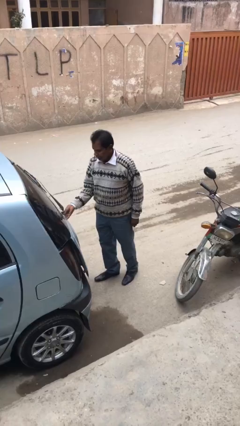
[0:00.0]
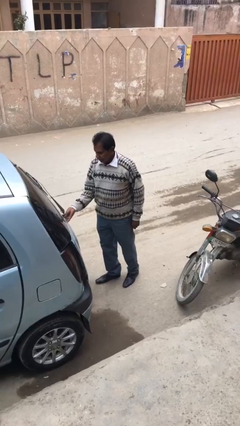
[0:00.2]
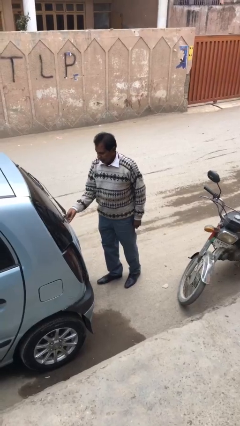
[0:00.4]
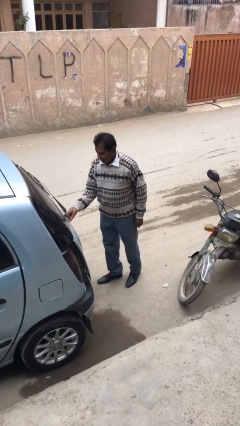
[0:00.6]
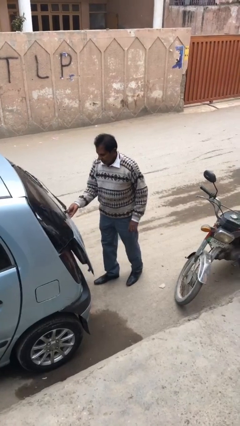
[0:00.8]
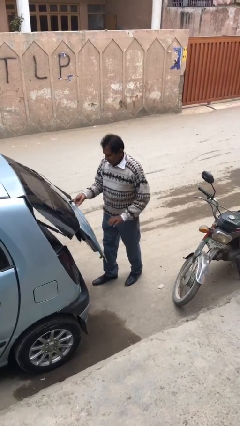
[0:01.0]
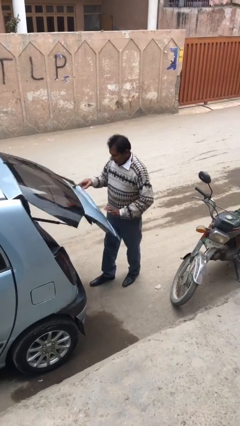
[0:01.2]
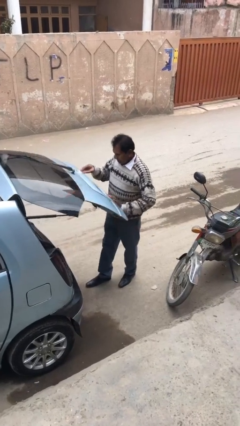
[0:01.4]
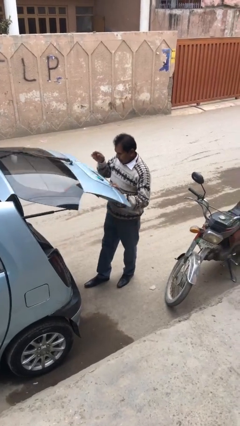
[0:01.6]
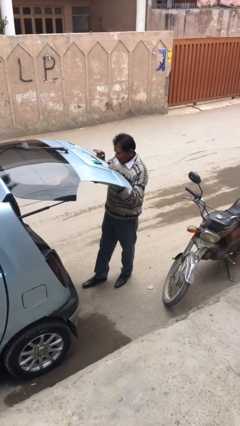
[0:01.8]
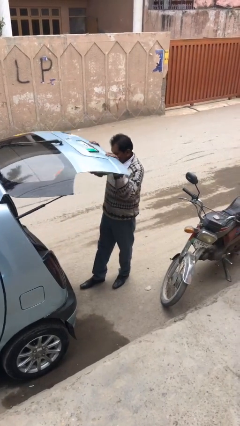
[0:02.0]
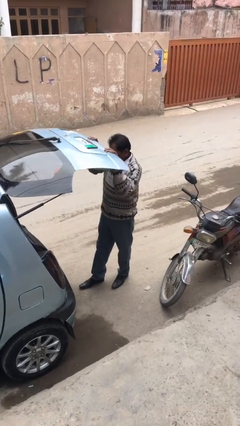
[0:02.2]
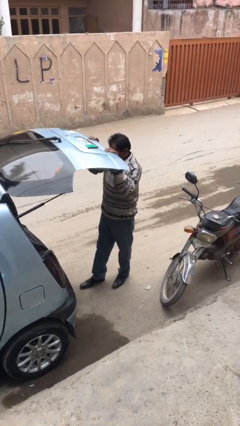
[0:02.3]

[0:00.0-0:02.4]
person opens car trunk

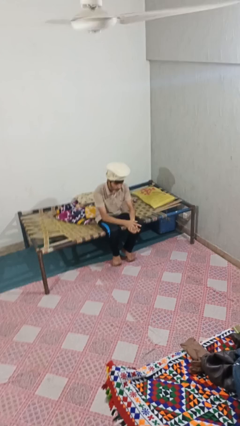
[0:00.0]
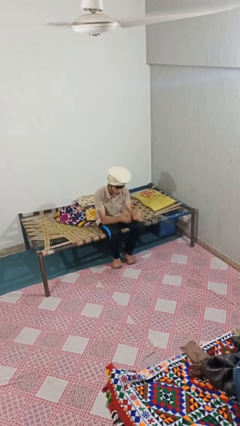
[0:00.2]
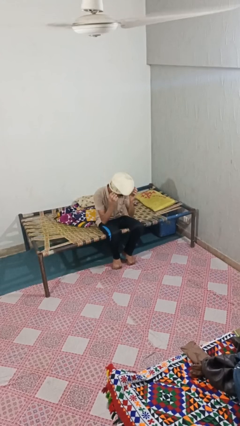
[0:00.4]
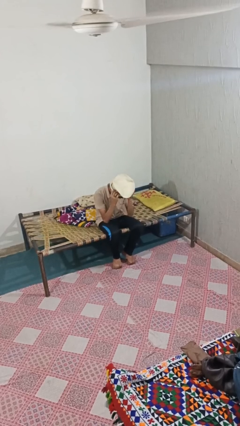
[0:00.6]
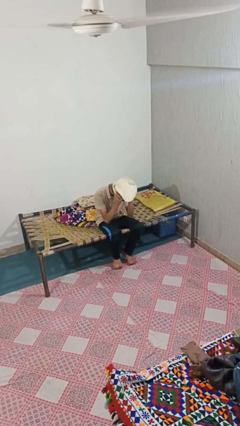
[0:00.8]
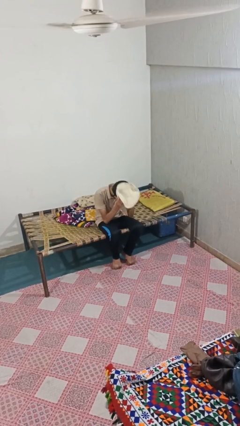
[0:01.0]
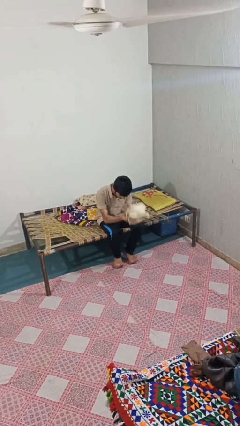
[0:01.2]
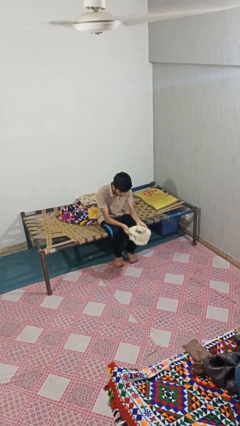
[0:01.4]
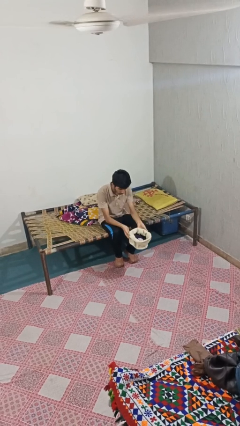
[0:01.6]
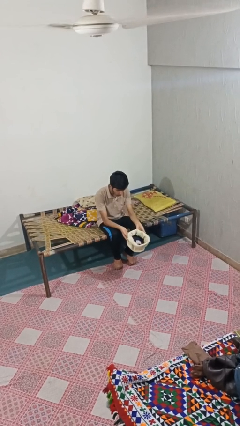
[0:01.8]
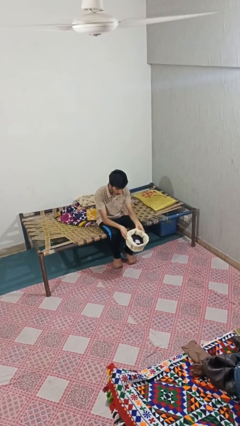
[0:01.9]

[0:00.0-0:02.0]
person takes off hat

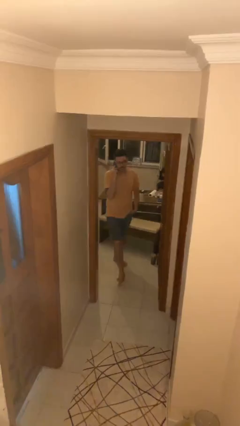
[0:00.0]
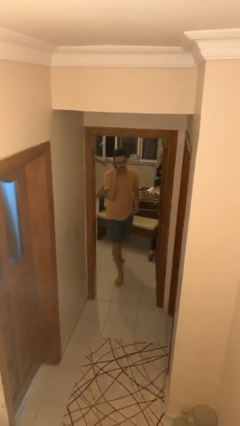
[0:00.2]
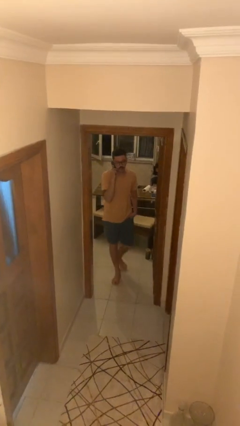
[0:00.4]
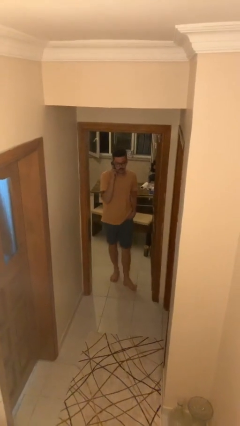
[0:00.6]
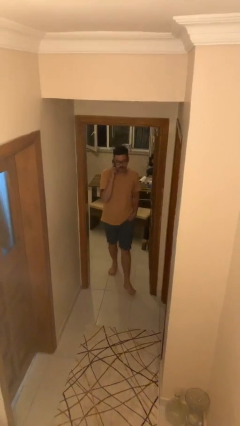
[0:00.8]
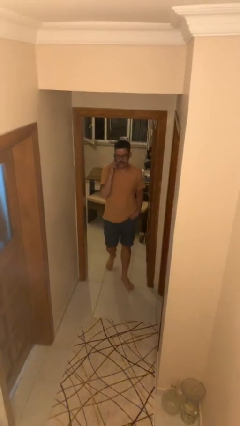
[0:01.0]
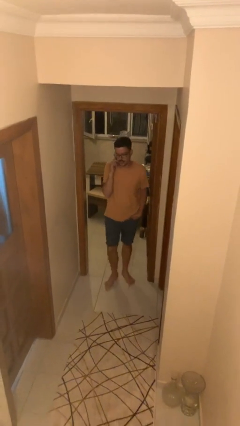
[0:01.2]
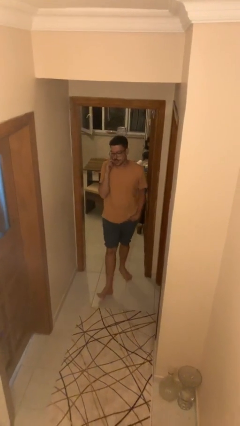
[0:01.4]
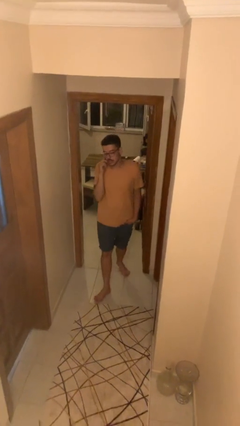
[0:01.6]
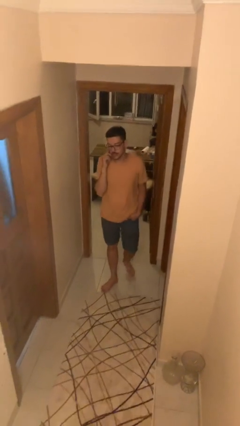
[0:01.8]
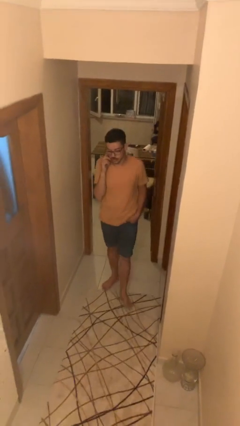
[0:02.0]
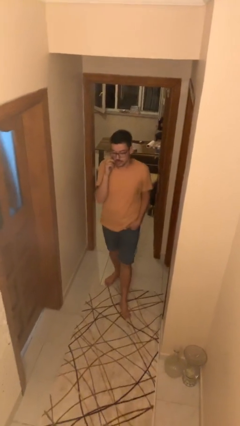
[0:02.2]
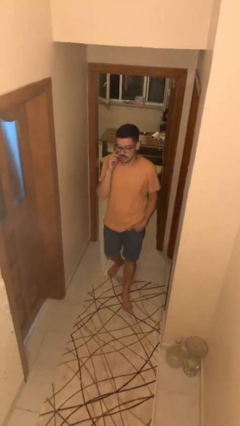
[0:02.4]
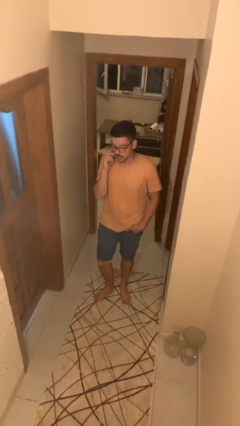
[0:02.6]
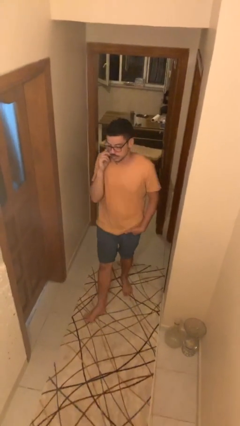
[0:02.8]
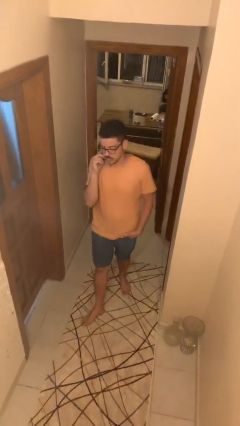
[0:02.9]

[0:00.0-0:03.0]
person enters scene through structure

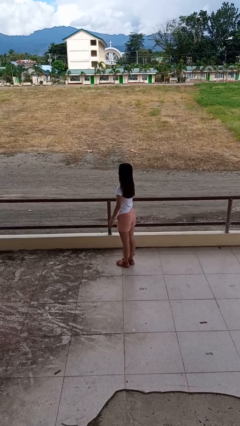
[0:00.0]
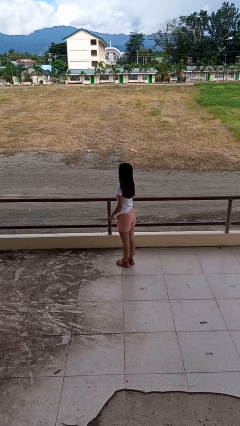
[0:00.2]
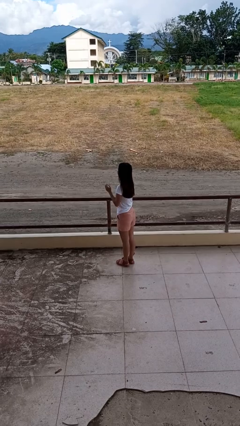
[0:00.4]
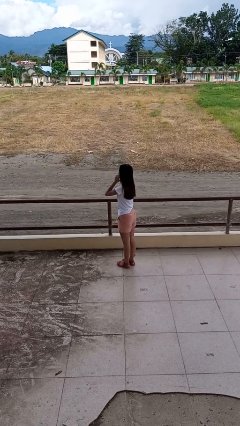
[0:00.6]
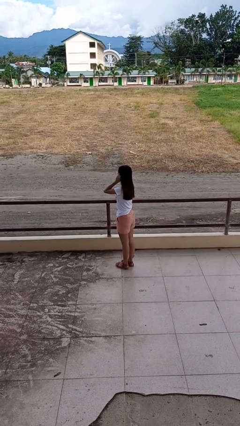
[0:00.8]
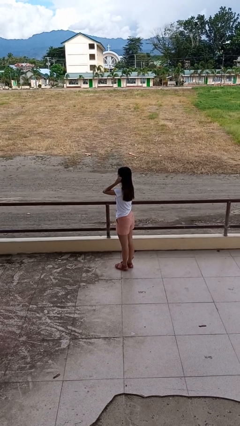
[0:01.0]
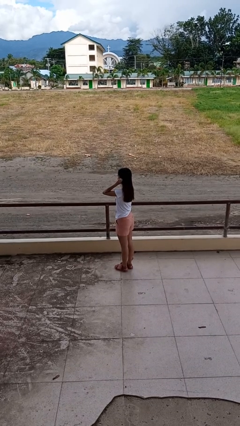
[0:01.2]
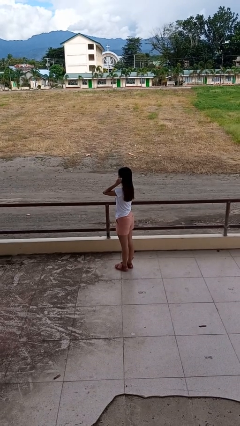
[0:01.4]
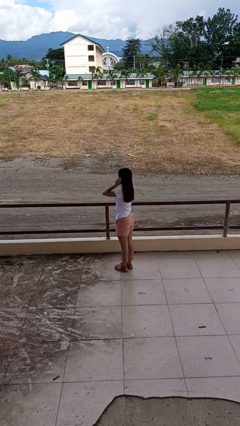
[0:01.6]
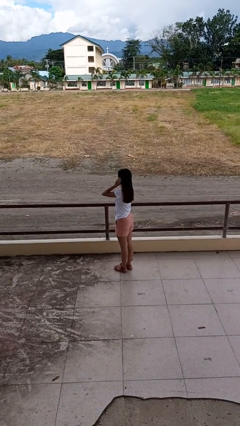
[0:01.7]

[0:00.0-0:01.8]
person touches earlobe

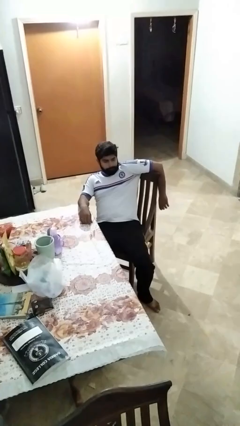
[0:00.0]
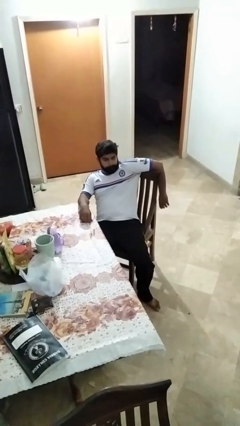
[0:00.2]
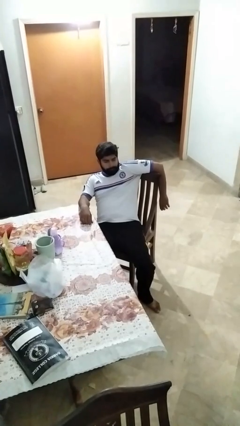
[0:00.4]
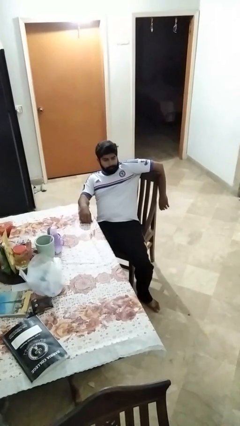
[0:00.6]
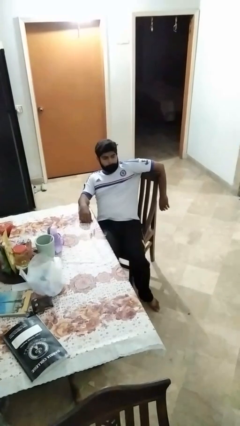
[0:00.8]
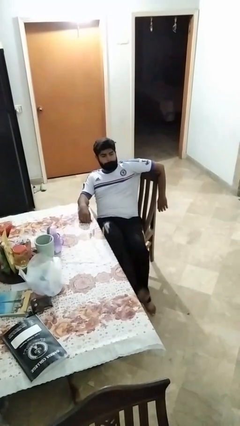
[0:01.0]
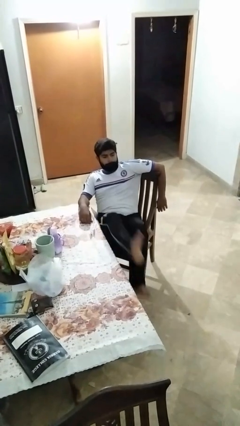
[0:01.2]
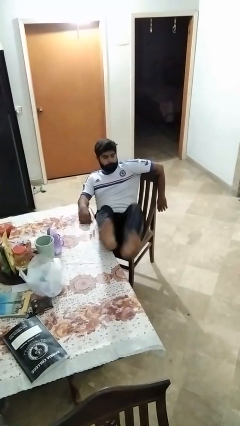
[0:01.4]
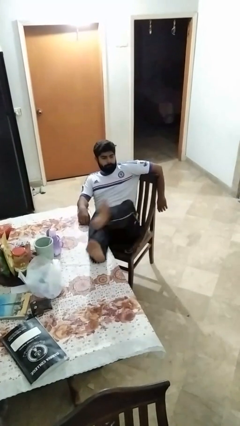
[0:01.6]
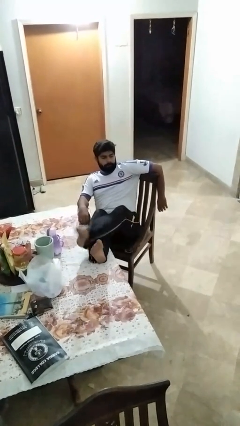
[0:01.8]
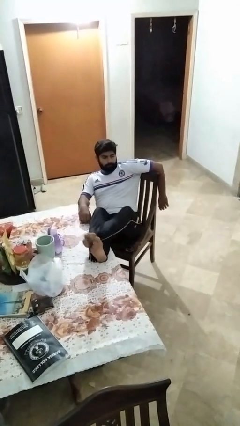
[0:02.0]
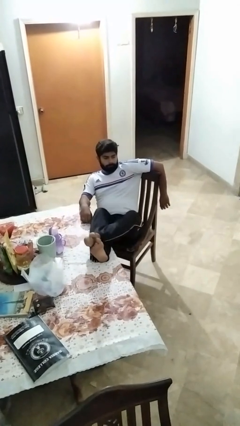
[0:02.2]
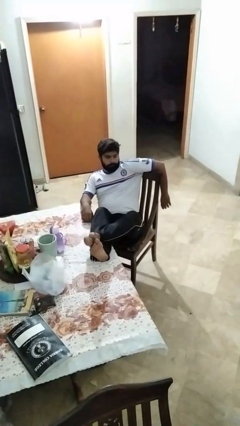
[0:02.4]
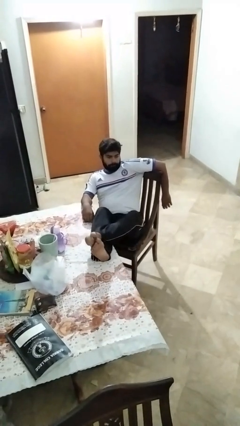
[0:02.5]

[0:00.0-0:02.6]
person puts feet up

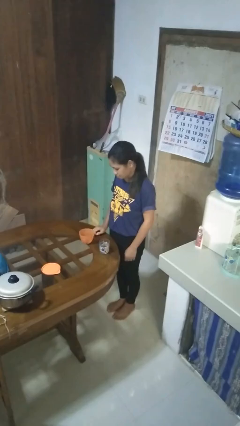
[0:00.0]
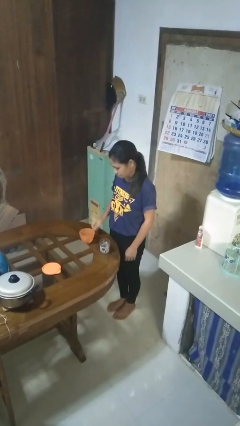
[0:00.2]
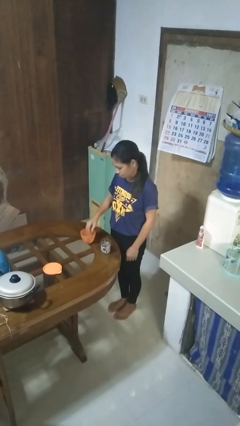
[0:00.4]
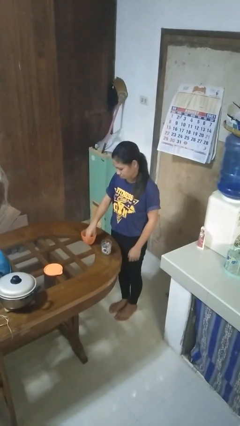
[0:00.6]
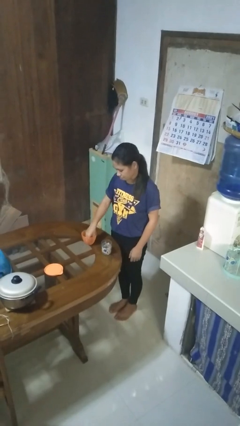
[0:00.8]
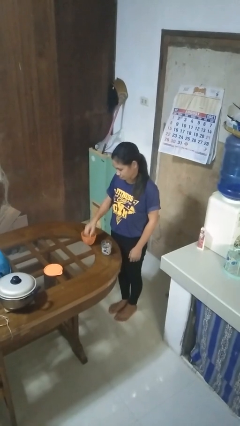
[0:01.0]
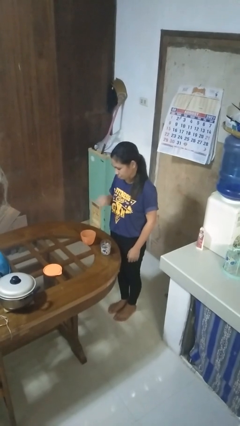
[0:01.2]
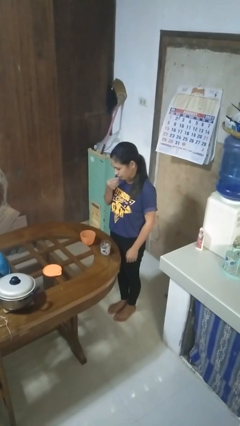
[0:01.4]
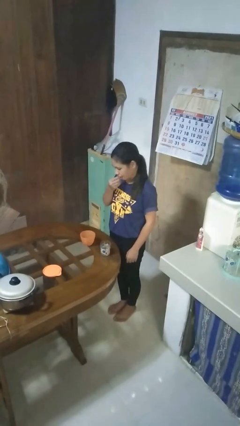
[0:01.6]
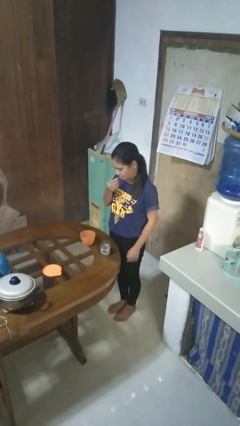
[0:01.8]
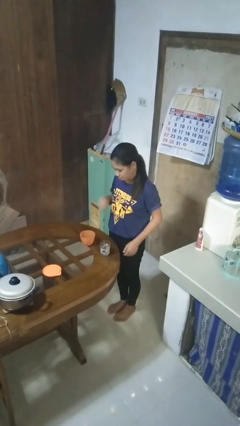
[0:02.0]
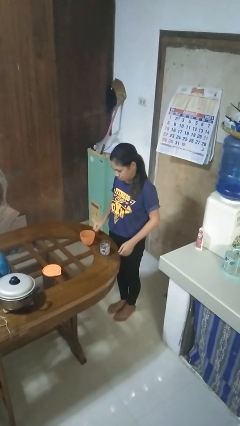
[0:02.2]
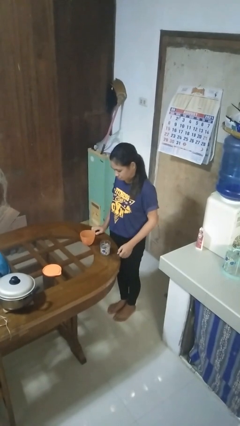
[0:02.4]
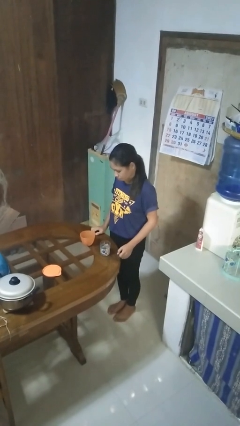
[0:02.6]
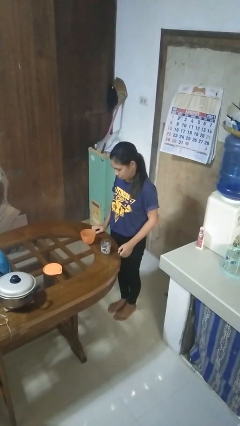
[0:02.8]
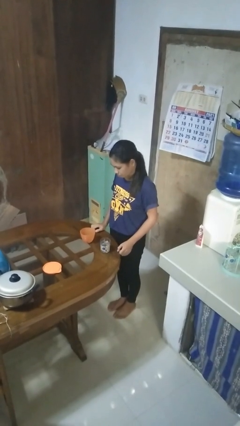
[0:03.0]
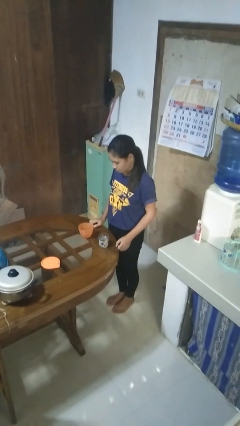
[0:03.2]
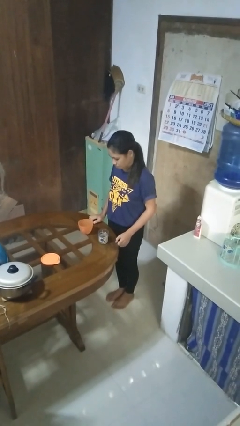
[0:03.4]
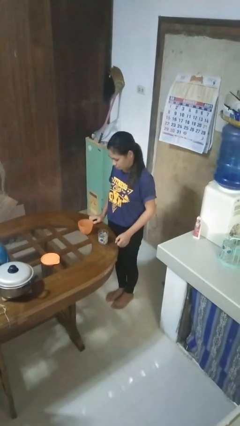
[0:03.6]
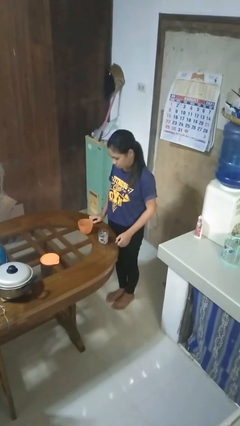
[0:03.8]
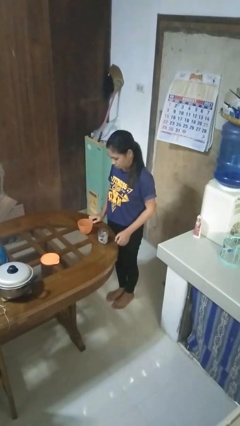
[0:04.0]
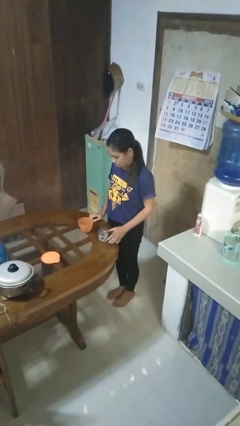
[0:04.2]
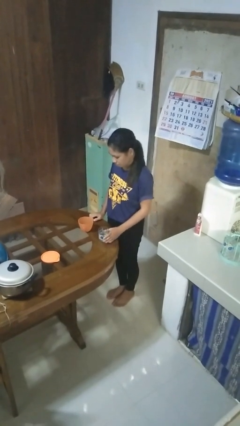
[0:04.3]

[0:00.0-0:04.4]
person takes medicine pills

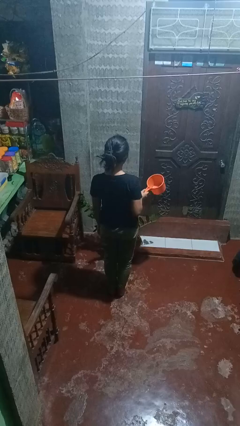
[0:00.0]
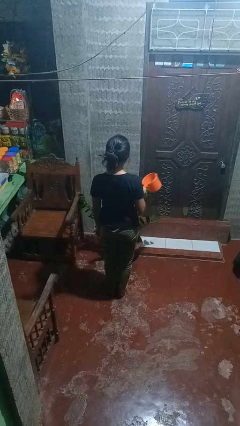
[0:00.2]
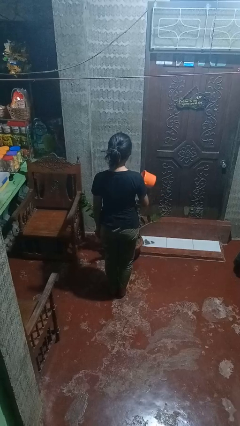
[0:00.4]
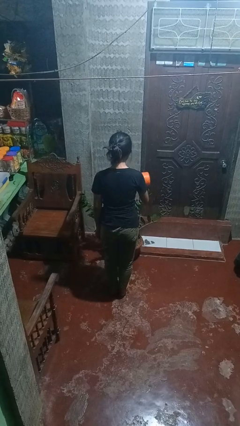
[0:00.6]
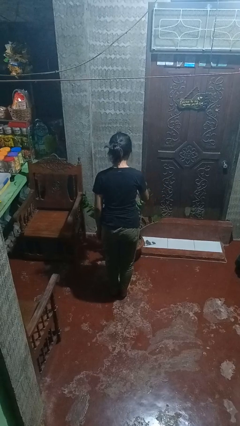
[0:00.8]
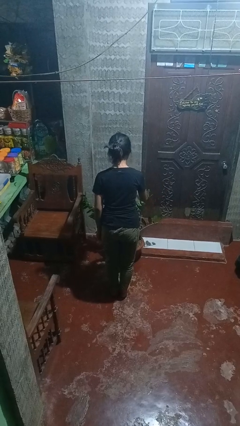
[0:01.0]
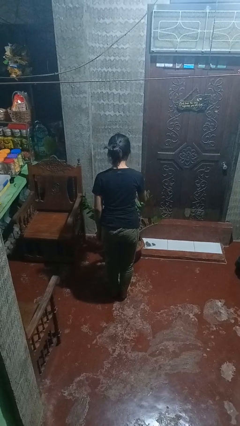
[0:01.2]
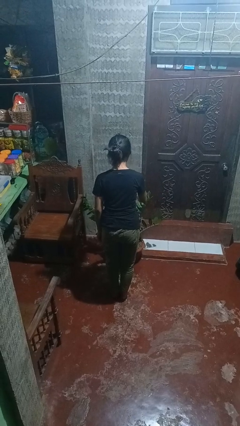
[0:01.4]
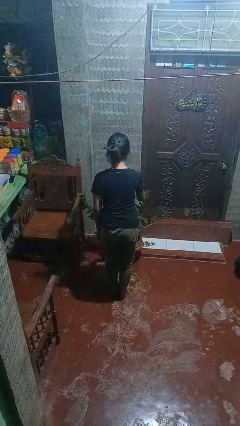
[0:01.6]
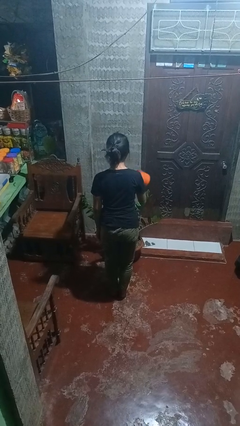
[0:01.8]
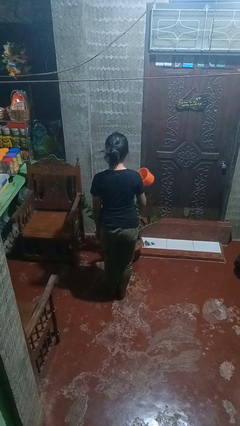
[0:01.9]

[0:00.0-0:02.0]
person waters houseplant
